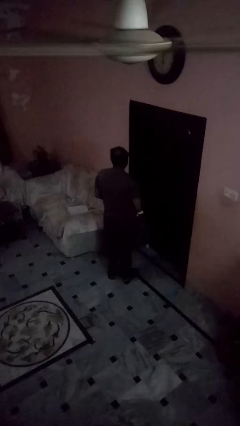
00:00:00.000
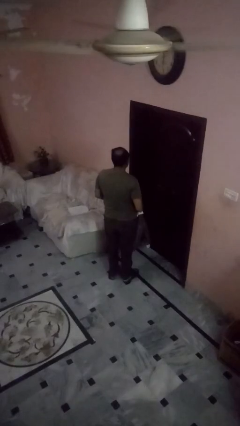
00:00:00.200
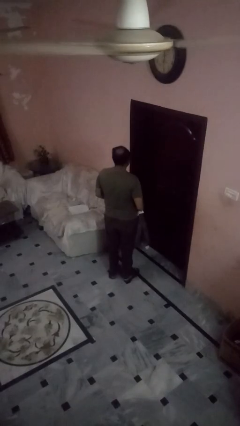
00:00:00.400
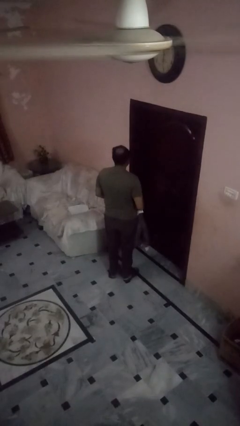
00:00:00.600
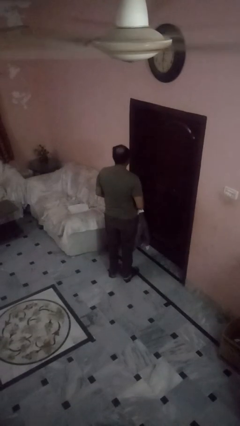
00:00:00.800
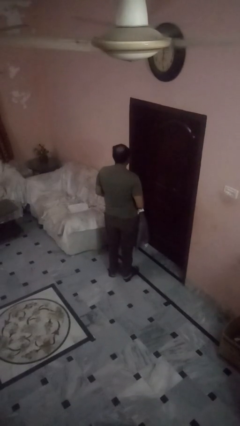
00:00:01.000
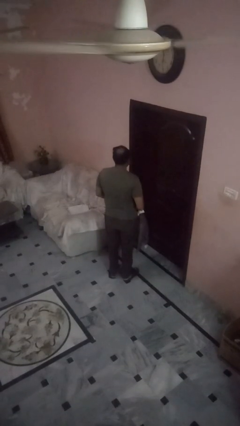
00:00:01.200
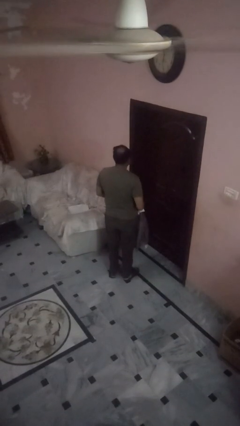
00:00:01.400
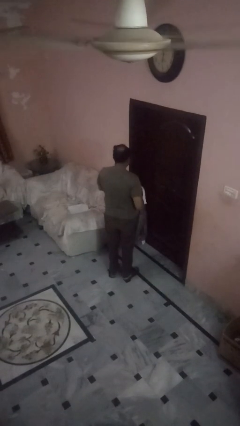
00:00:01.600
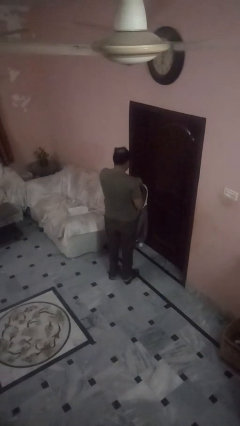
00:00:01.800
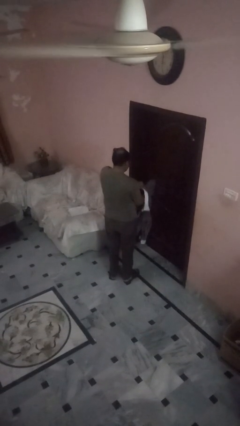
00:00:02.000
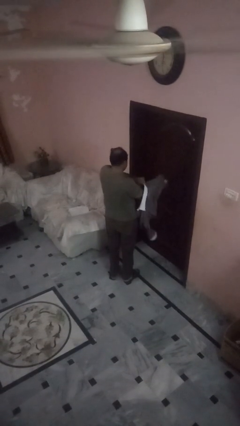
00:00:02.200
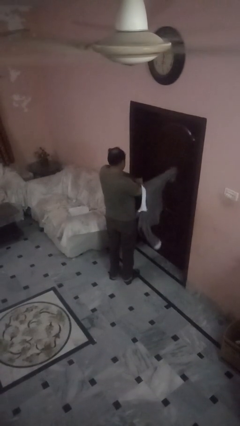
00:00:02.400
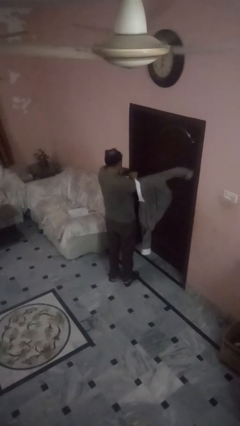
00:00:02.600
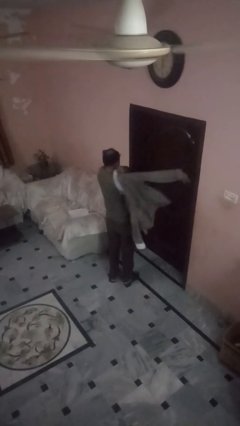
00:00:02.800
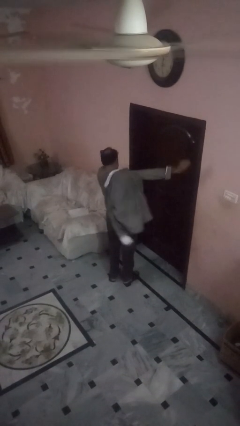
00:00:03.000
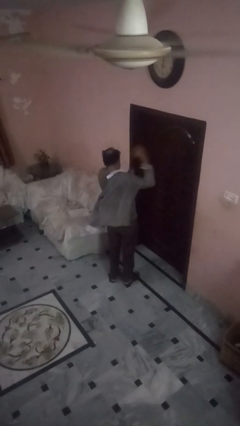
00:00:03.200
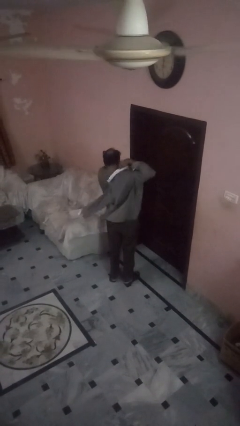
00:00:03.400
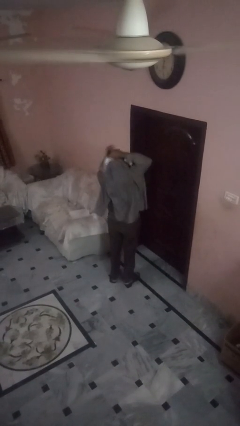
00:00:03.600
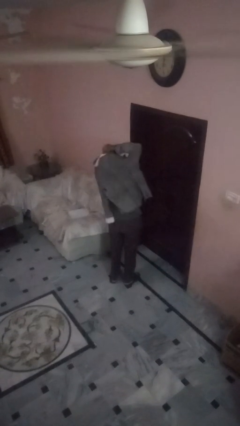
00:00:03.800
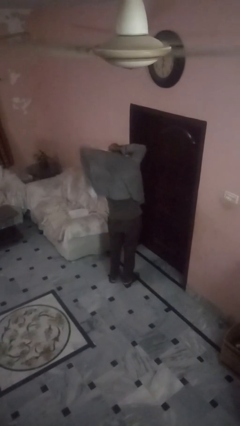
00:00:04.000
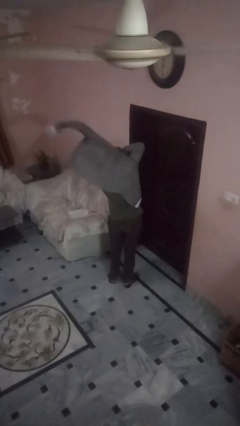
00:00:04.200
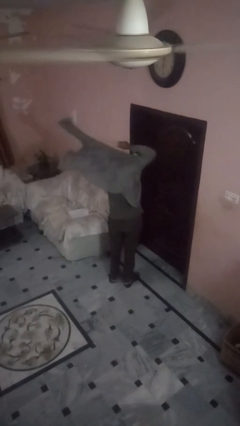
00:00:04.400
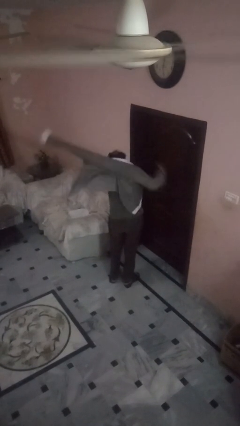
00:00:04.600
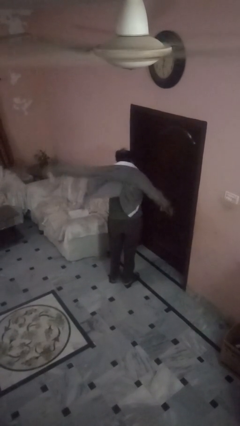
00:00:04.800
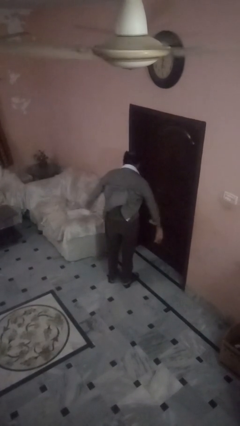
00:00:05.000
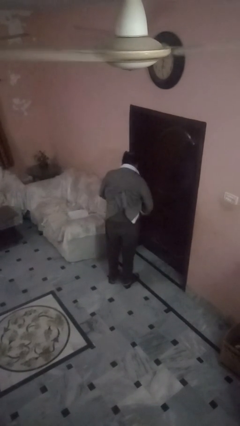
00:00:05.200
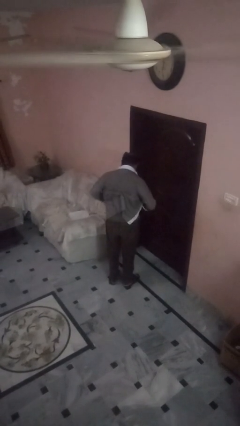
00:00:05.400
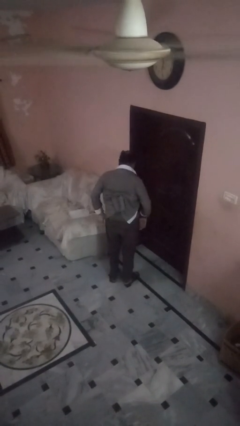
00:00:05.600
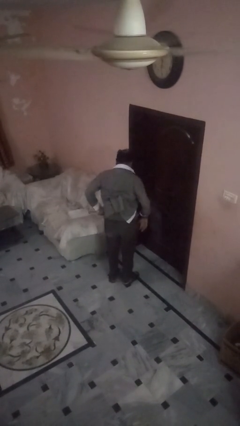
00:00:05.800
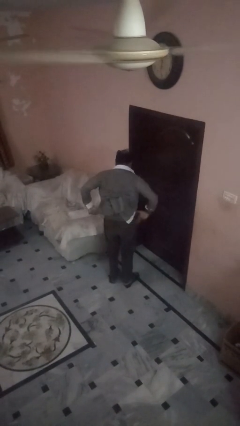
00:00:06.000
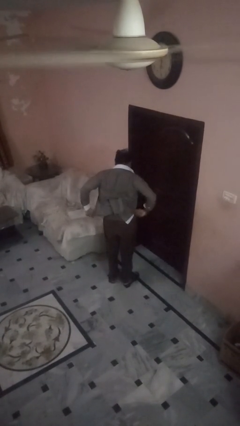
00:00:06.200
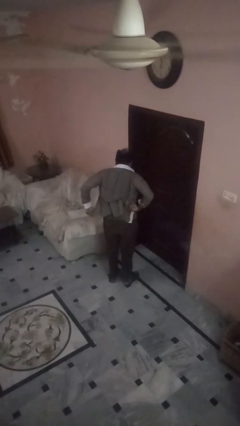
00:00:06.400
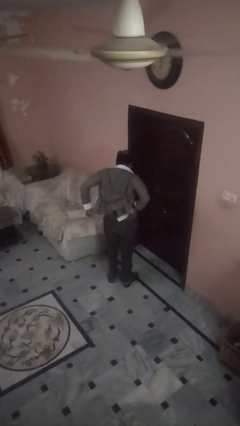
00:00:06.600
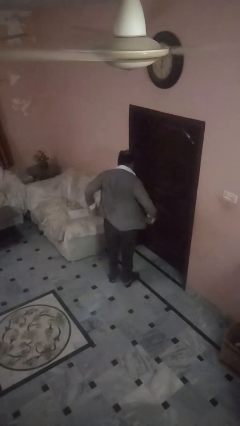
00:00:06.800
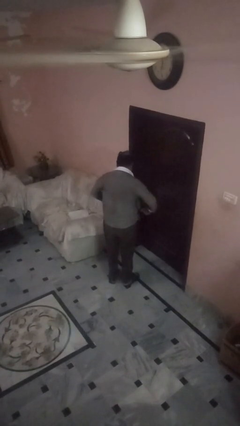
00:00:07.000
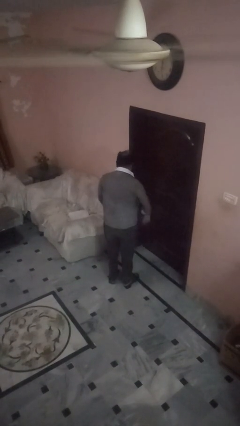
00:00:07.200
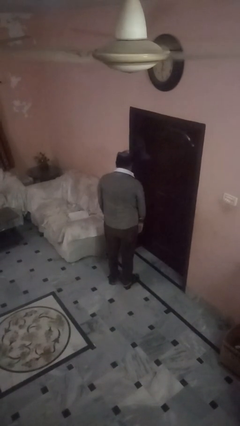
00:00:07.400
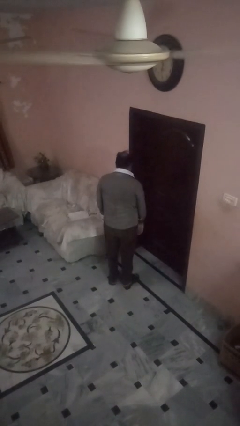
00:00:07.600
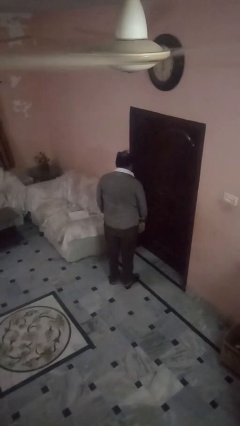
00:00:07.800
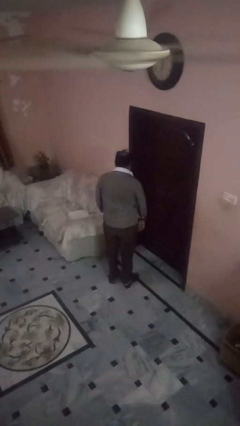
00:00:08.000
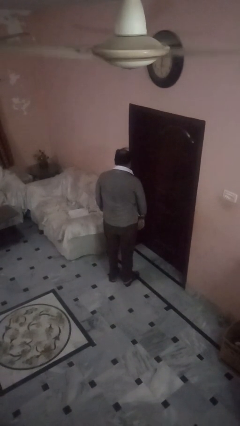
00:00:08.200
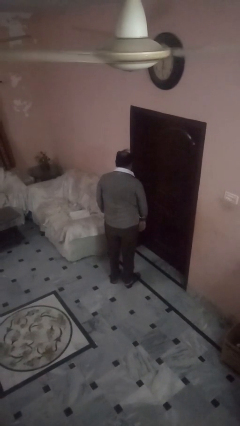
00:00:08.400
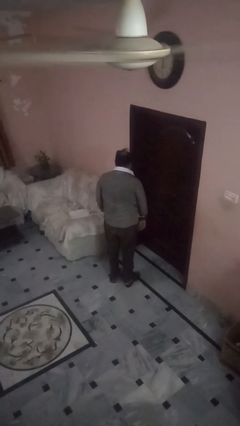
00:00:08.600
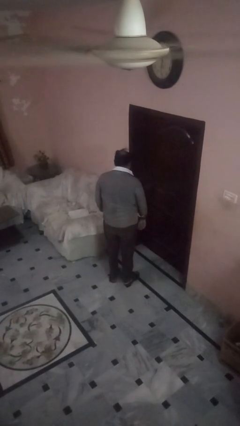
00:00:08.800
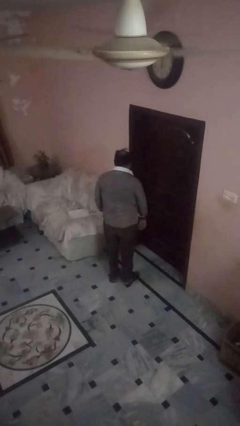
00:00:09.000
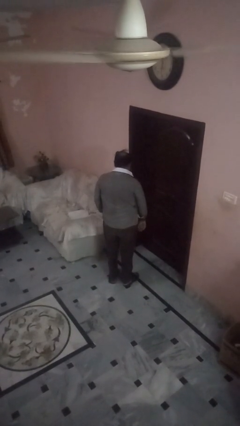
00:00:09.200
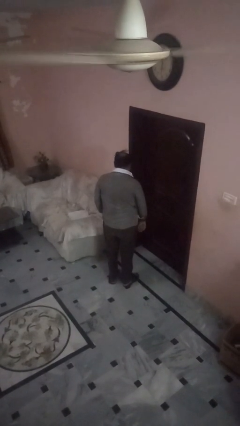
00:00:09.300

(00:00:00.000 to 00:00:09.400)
person puts on shirt

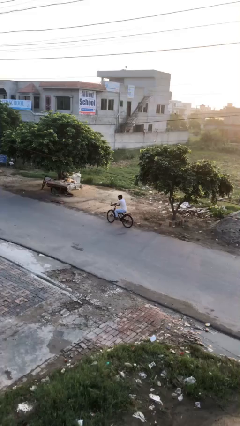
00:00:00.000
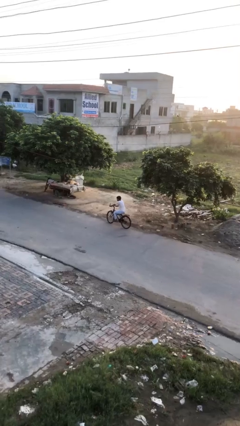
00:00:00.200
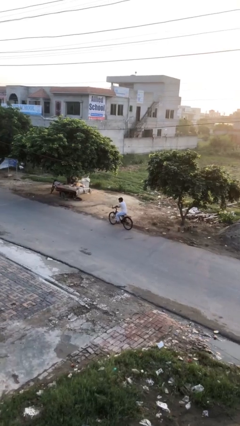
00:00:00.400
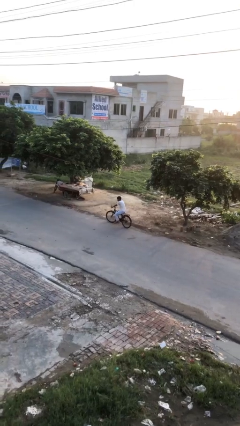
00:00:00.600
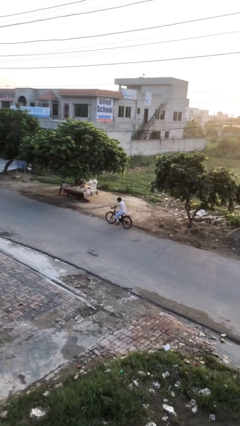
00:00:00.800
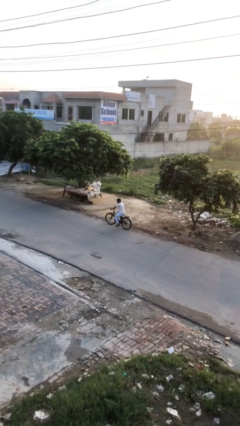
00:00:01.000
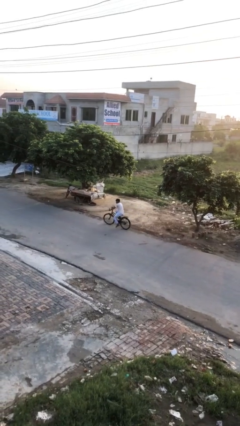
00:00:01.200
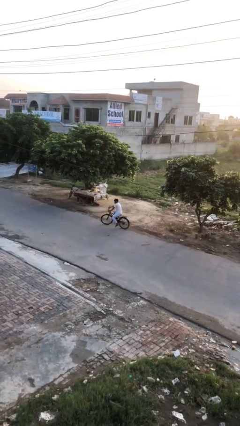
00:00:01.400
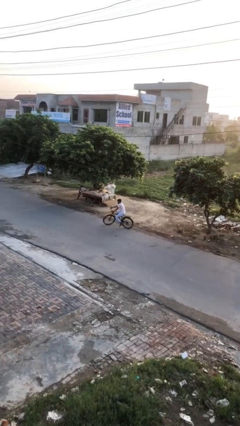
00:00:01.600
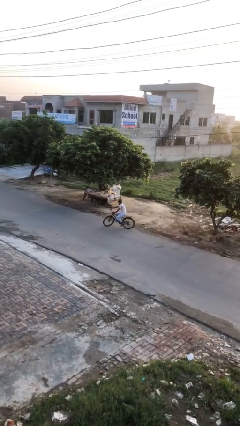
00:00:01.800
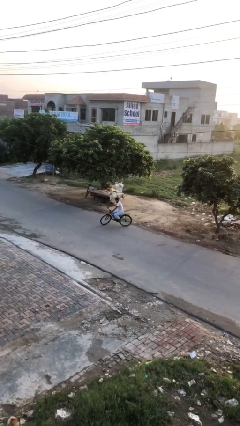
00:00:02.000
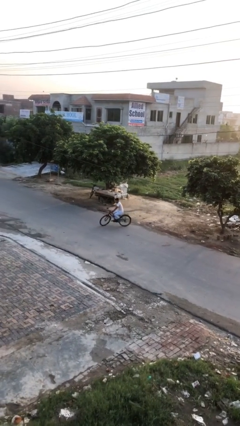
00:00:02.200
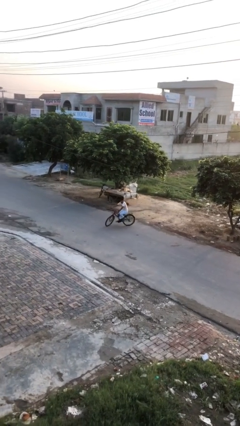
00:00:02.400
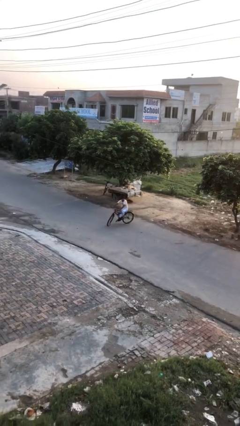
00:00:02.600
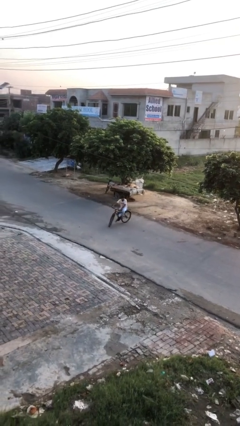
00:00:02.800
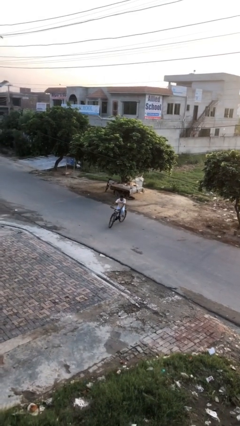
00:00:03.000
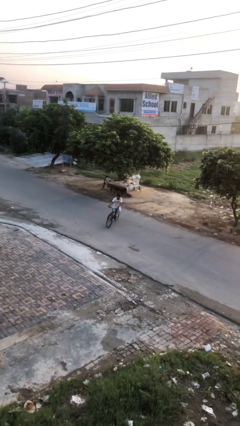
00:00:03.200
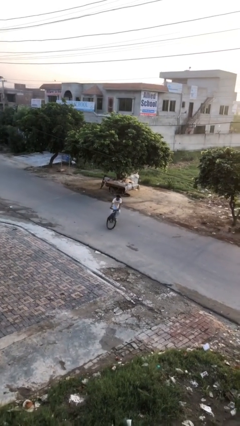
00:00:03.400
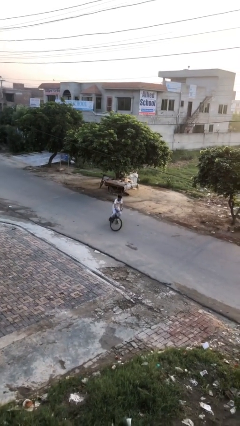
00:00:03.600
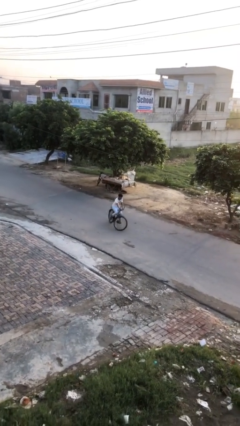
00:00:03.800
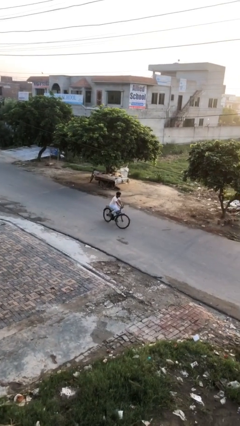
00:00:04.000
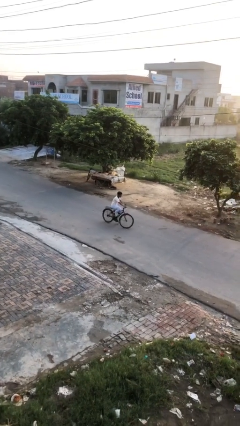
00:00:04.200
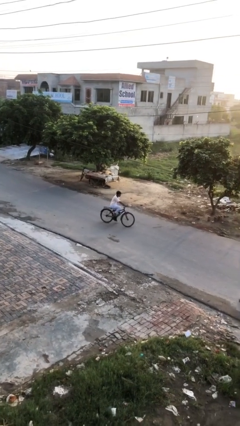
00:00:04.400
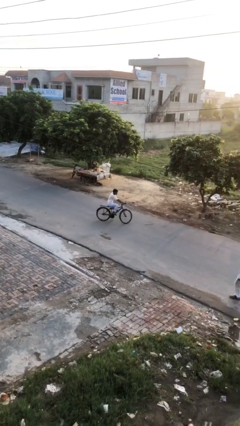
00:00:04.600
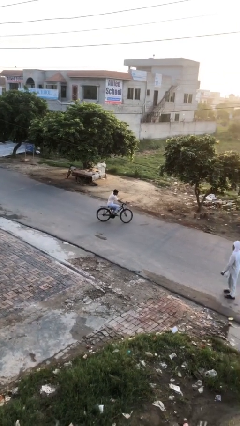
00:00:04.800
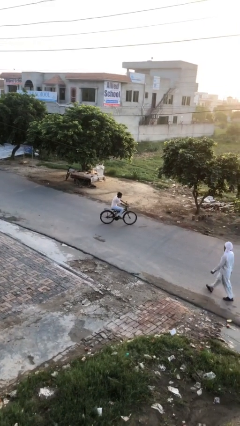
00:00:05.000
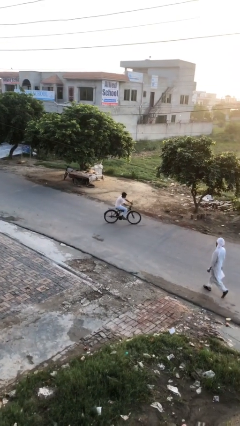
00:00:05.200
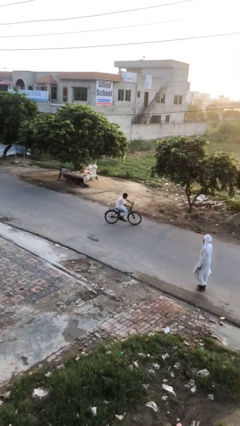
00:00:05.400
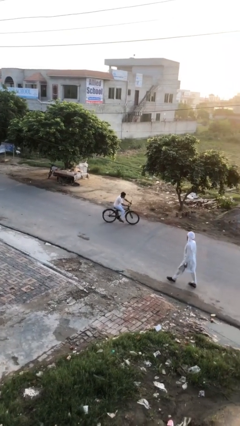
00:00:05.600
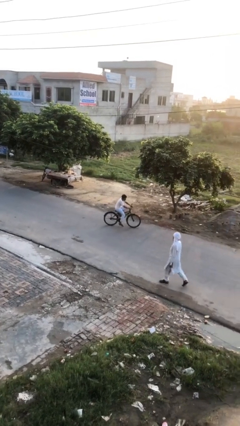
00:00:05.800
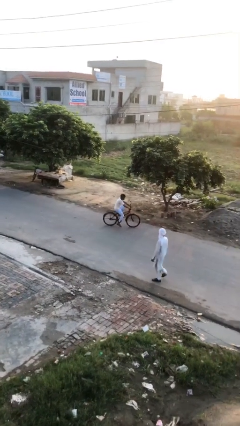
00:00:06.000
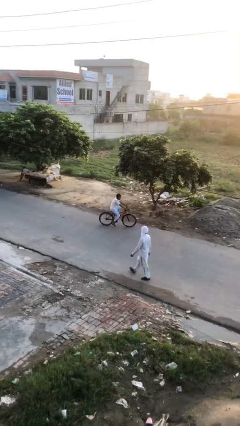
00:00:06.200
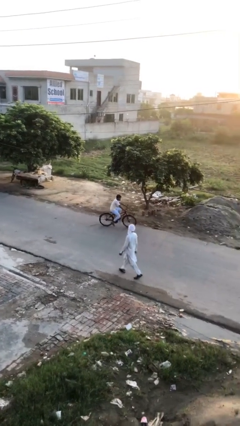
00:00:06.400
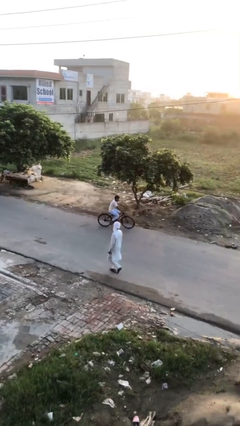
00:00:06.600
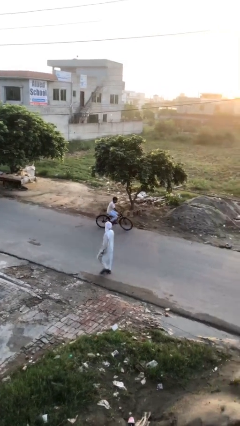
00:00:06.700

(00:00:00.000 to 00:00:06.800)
person rides bicycle

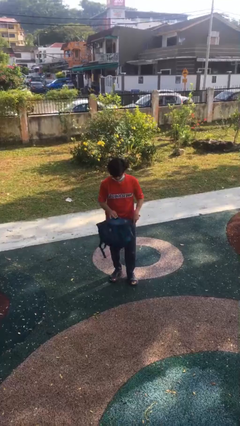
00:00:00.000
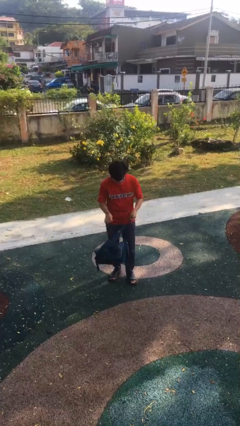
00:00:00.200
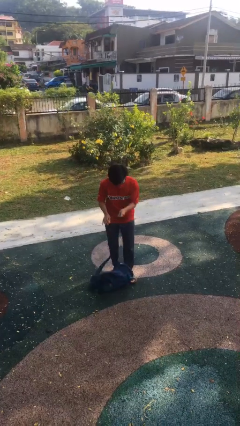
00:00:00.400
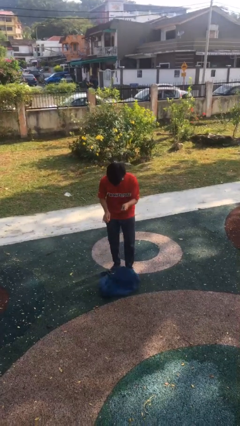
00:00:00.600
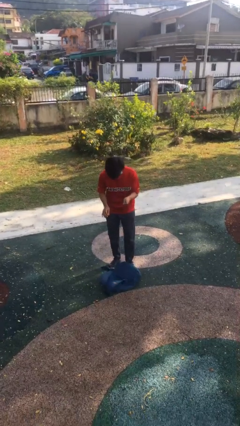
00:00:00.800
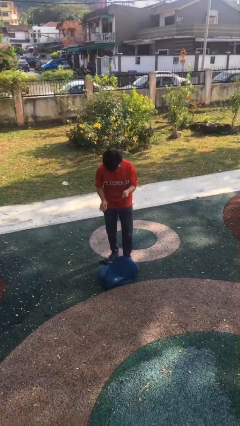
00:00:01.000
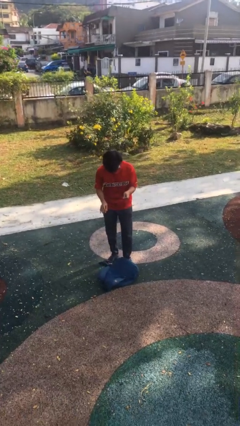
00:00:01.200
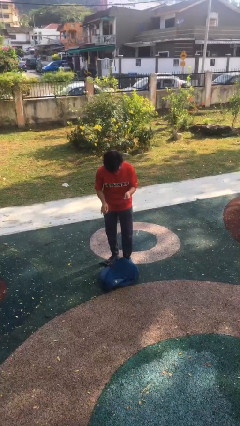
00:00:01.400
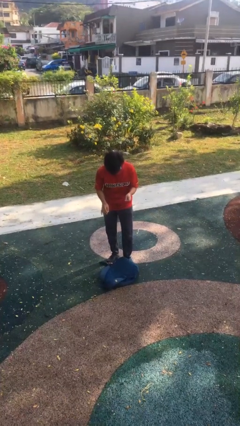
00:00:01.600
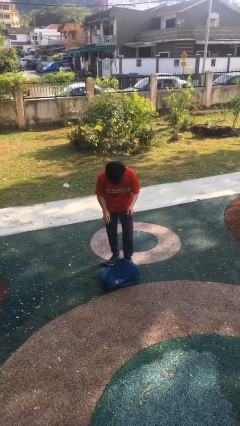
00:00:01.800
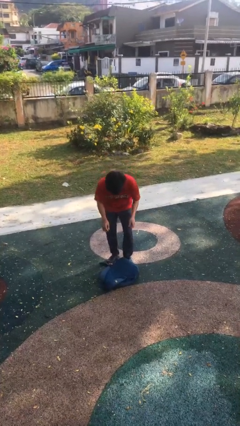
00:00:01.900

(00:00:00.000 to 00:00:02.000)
person drops object
